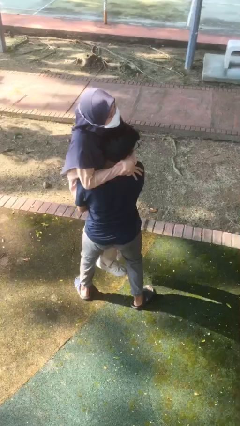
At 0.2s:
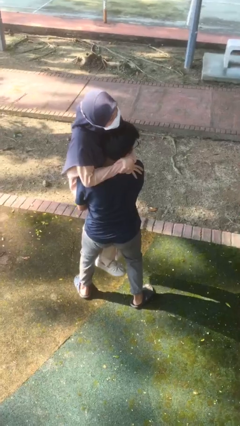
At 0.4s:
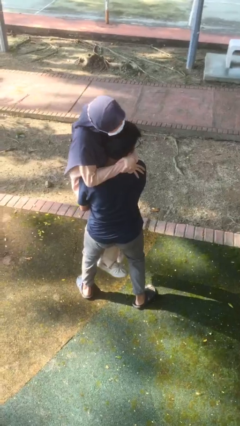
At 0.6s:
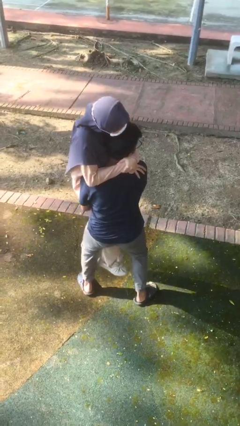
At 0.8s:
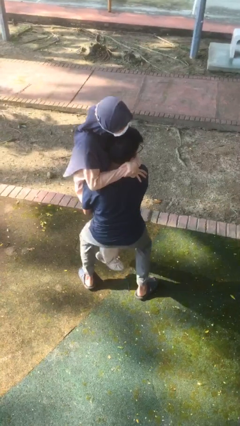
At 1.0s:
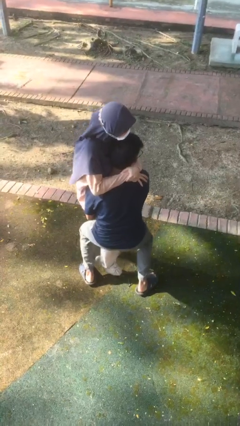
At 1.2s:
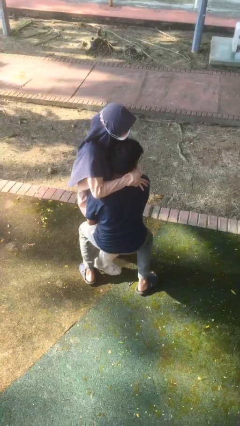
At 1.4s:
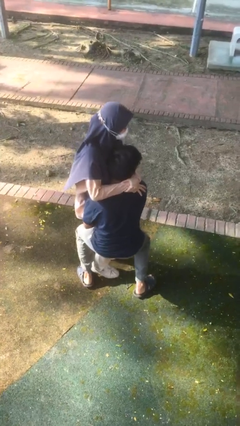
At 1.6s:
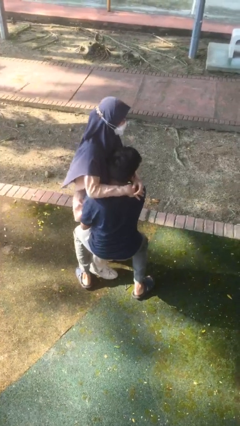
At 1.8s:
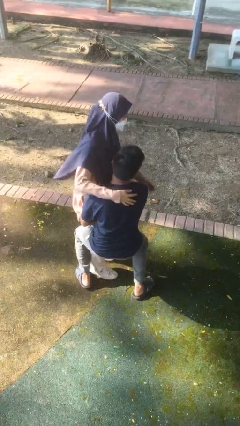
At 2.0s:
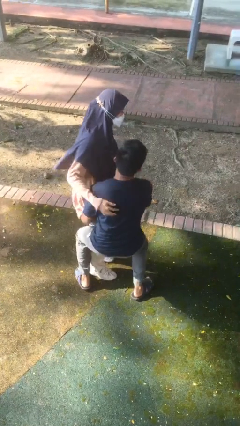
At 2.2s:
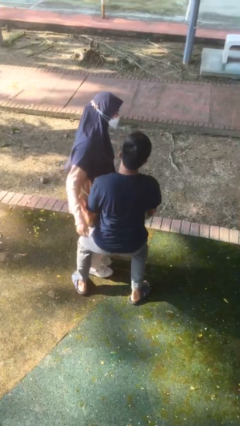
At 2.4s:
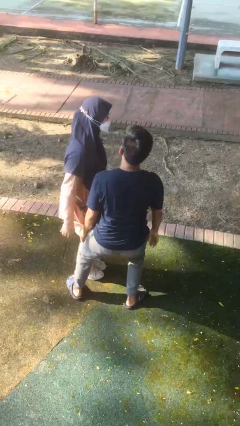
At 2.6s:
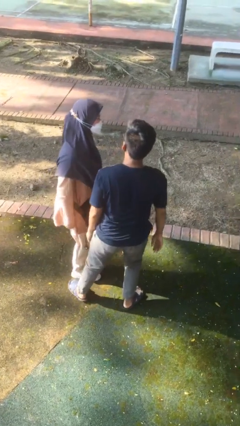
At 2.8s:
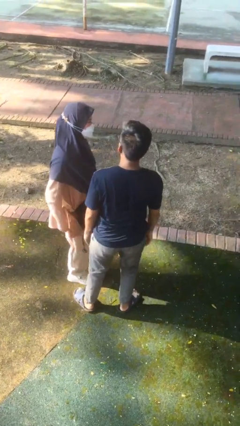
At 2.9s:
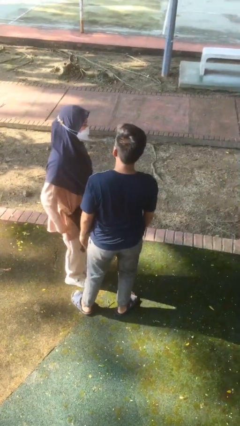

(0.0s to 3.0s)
person puts down person

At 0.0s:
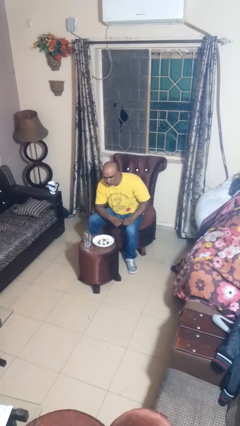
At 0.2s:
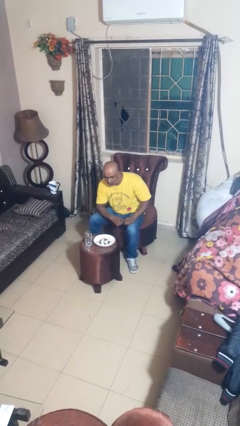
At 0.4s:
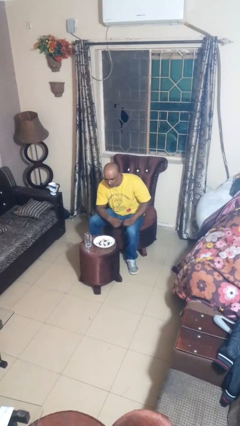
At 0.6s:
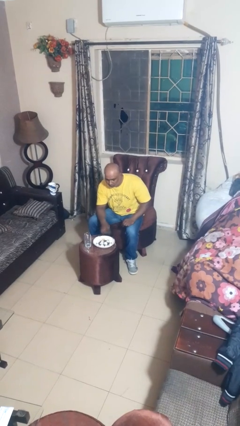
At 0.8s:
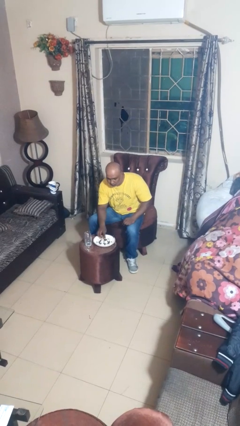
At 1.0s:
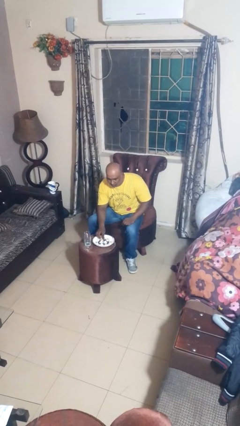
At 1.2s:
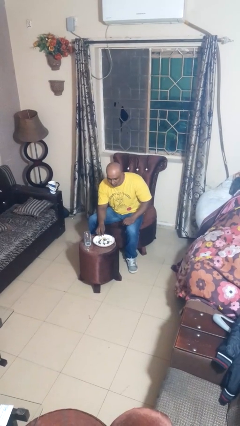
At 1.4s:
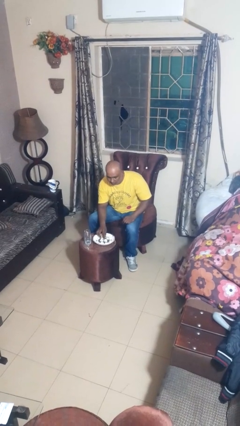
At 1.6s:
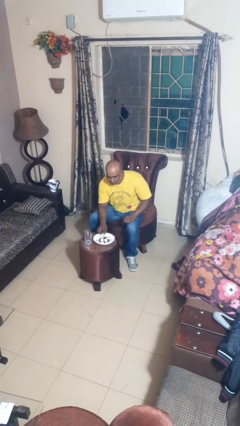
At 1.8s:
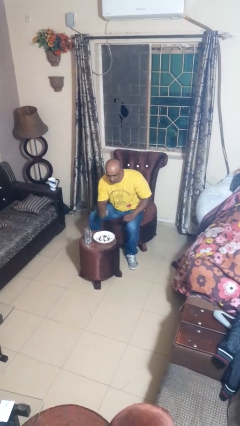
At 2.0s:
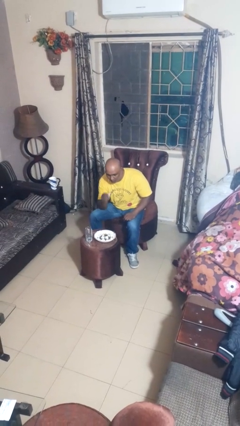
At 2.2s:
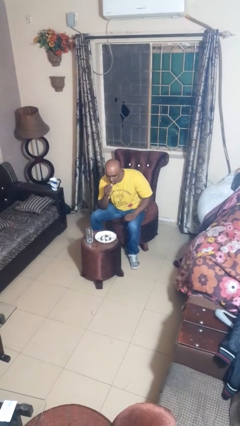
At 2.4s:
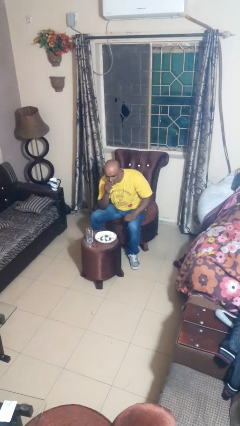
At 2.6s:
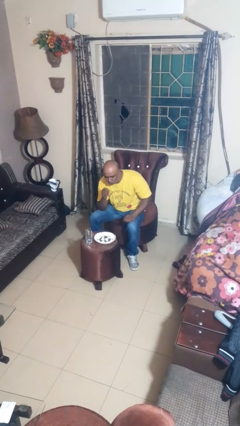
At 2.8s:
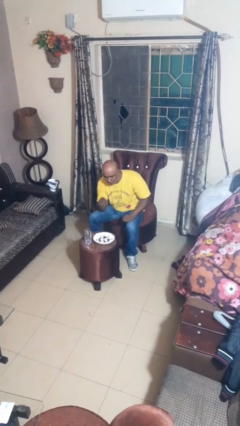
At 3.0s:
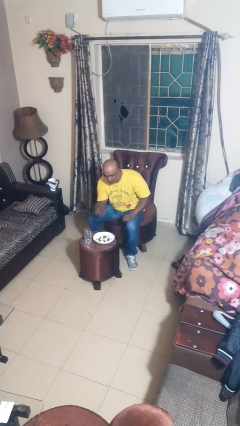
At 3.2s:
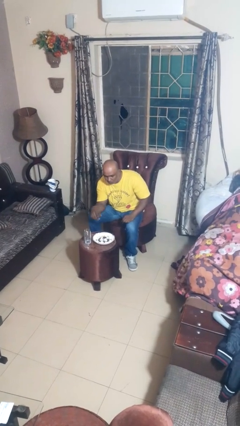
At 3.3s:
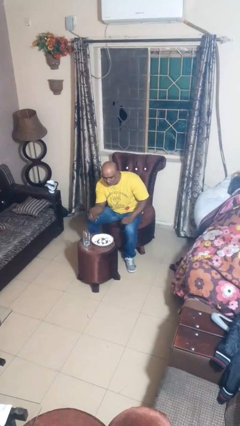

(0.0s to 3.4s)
person eats with hands

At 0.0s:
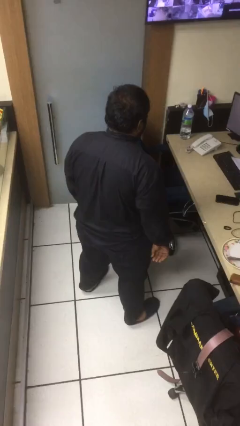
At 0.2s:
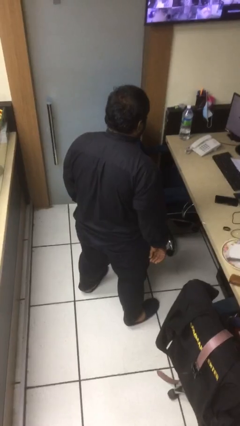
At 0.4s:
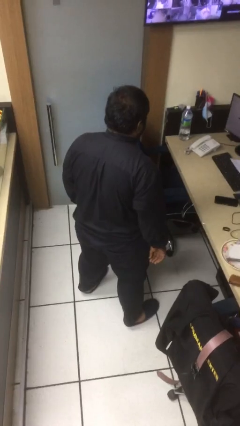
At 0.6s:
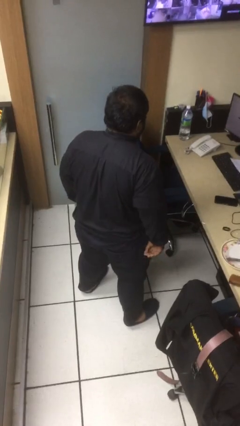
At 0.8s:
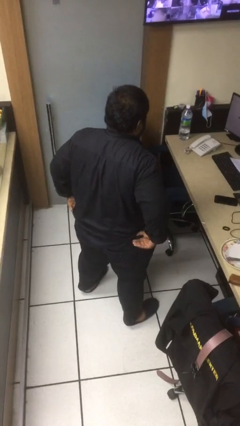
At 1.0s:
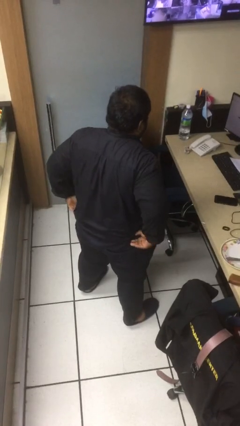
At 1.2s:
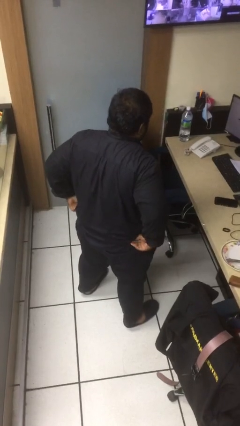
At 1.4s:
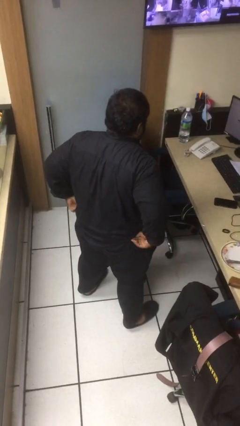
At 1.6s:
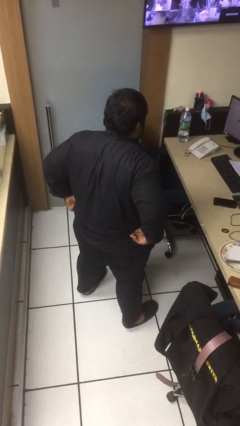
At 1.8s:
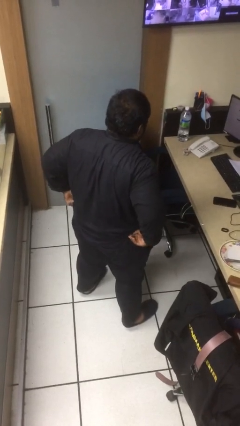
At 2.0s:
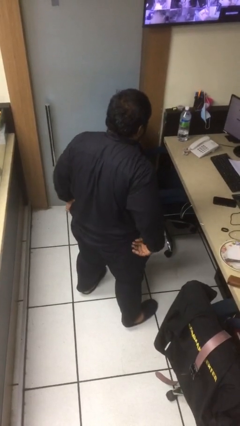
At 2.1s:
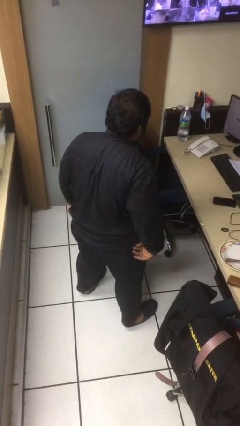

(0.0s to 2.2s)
person hikes up pants

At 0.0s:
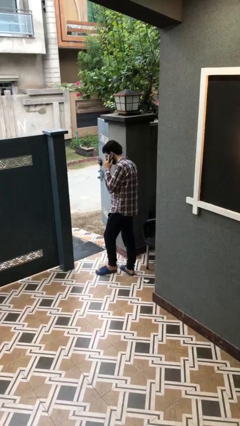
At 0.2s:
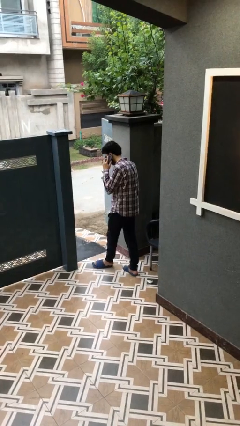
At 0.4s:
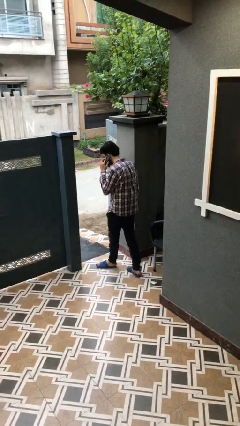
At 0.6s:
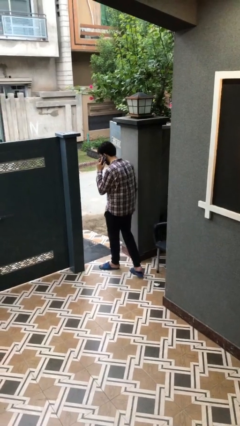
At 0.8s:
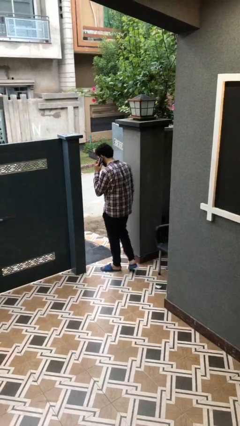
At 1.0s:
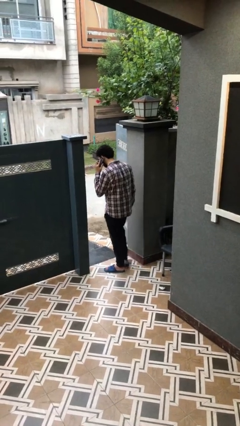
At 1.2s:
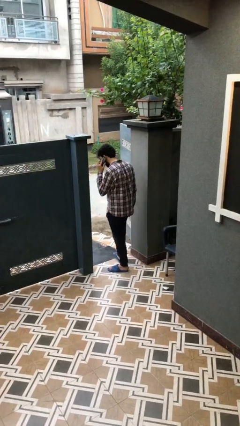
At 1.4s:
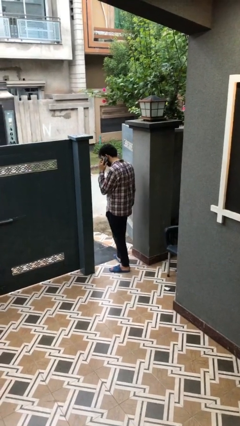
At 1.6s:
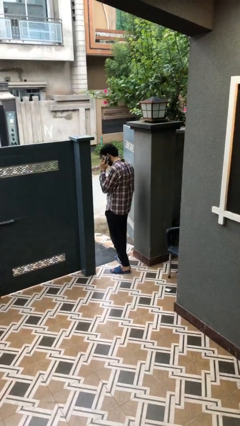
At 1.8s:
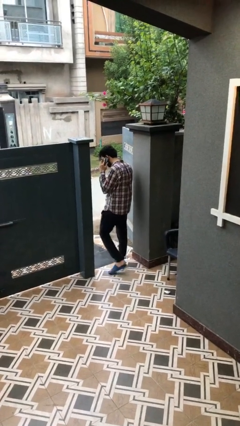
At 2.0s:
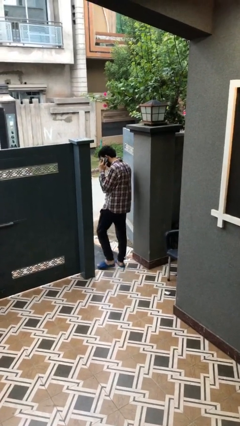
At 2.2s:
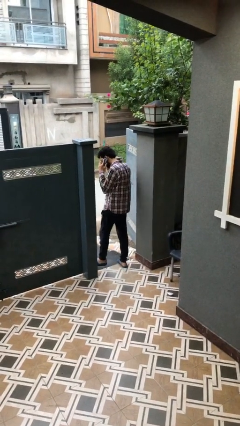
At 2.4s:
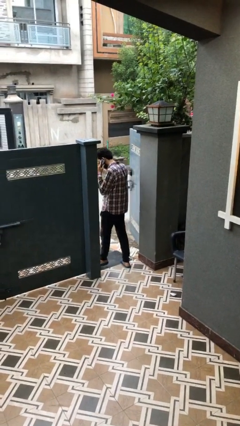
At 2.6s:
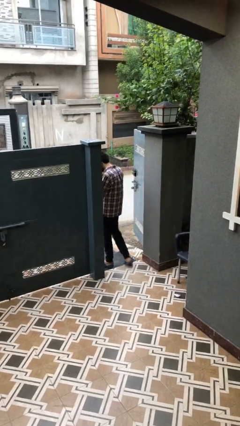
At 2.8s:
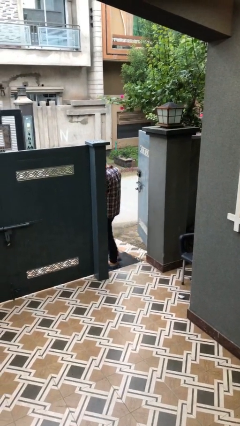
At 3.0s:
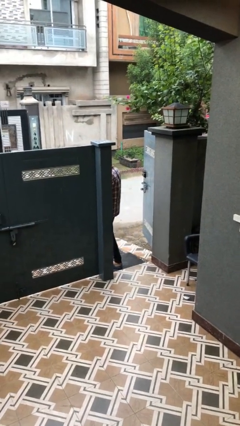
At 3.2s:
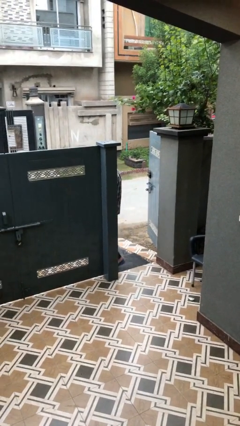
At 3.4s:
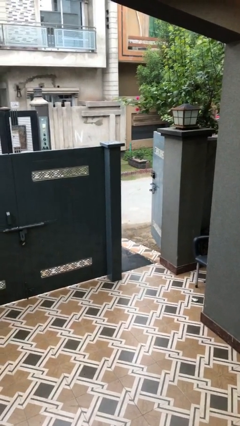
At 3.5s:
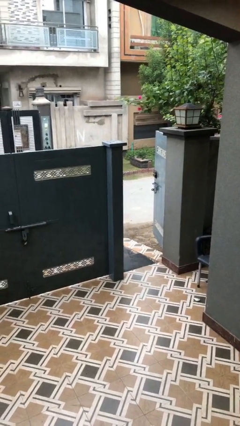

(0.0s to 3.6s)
person exits scene through structure

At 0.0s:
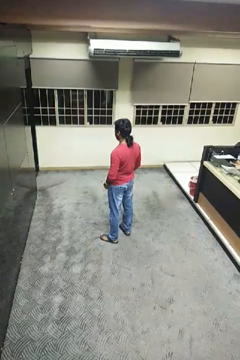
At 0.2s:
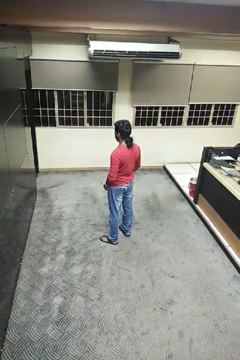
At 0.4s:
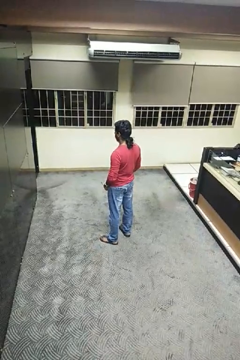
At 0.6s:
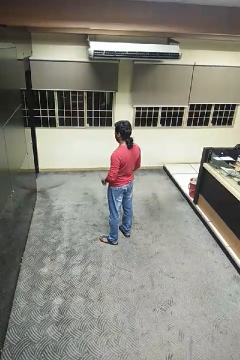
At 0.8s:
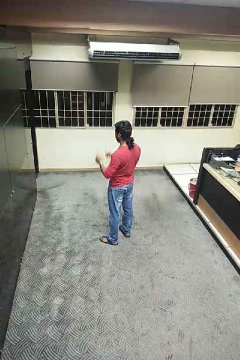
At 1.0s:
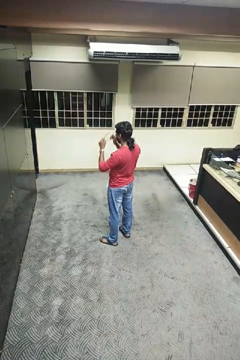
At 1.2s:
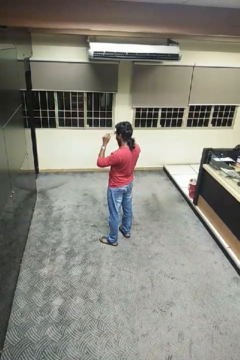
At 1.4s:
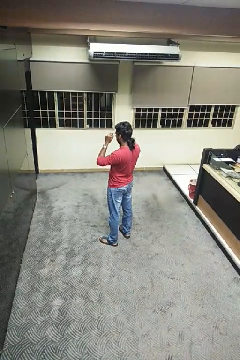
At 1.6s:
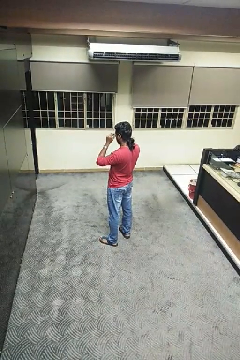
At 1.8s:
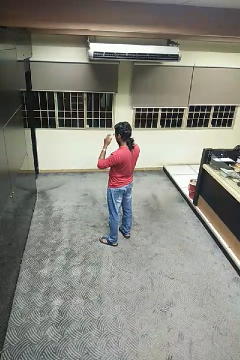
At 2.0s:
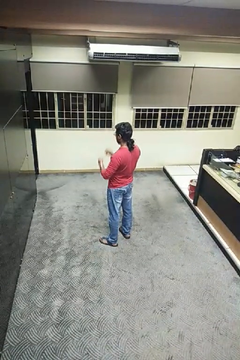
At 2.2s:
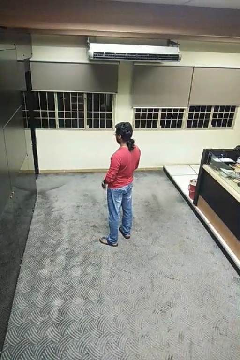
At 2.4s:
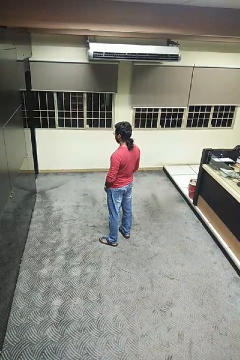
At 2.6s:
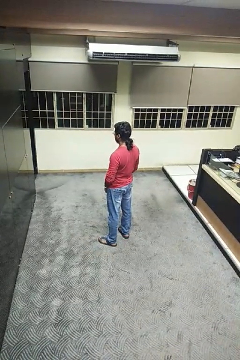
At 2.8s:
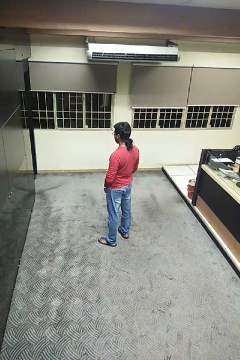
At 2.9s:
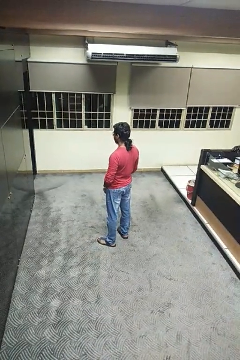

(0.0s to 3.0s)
person puts on glasses

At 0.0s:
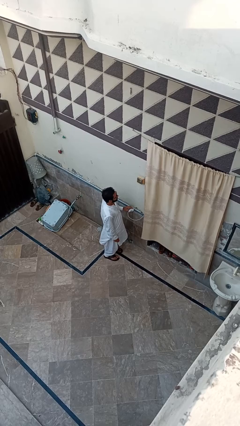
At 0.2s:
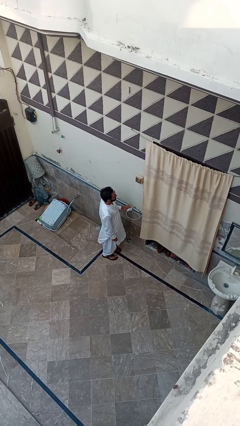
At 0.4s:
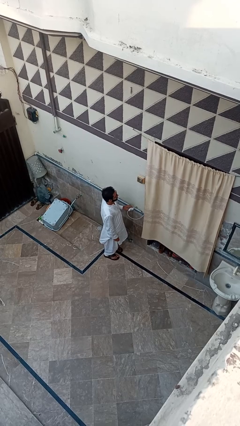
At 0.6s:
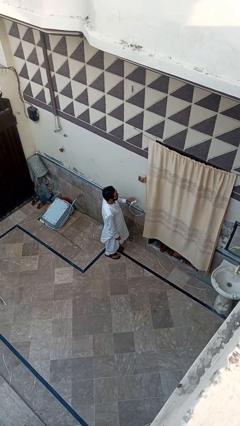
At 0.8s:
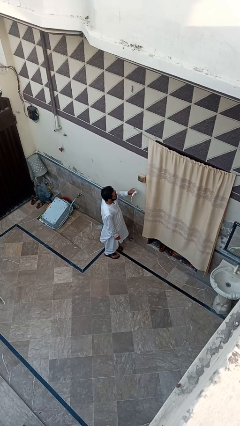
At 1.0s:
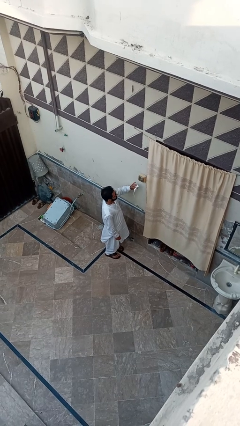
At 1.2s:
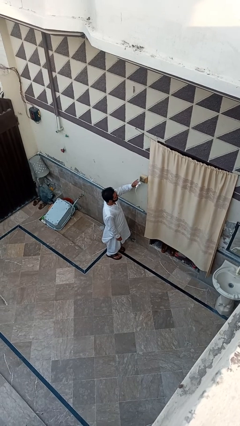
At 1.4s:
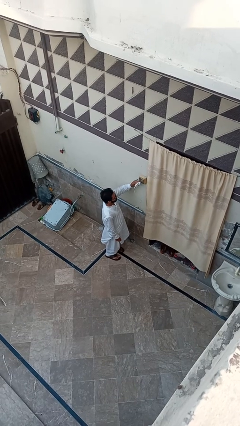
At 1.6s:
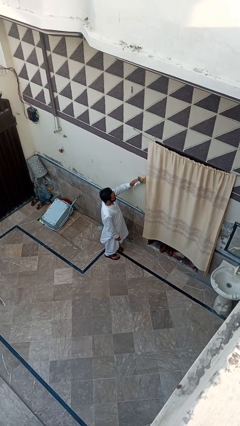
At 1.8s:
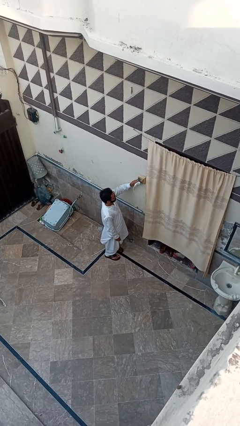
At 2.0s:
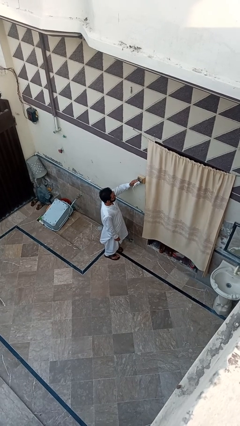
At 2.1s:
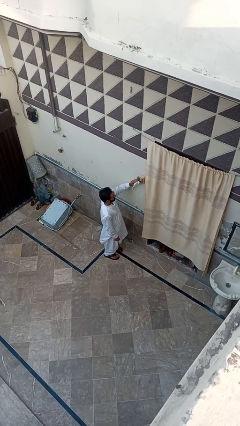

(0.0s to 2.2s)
person plugs into electrical socket

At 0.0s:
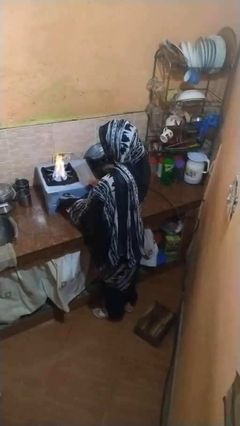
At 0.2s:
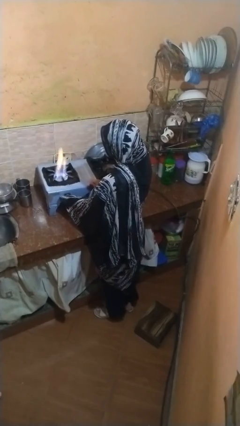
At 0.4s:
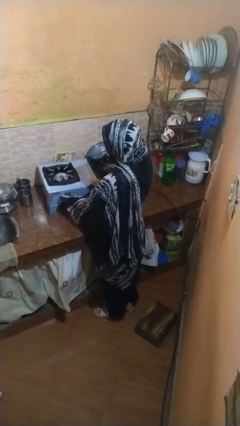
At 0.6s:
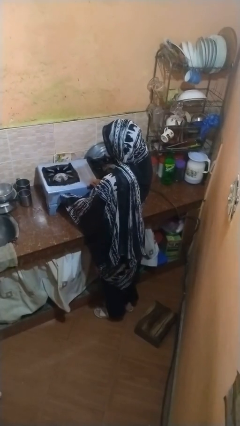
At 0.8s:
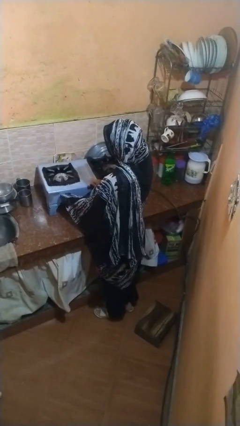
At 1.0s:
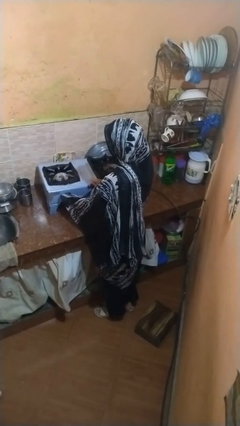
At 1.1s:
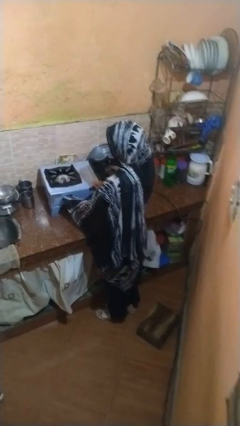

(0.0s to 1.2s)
person turns off stovetop
